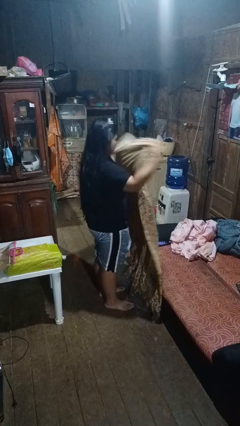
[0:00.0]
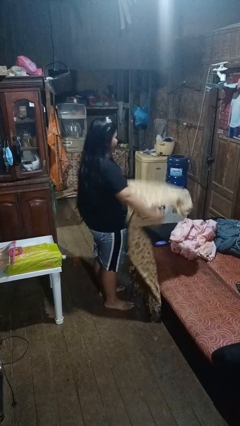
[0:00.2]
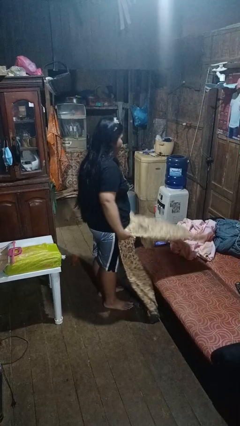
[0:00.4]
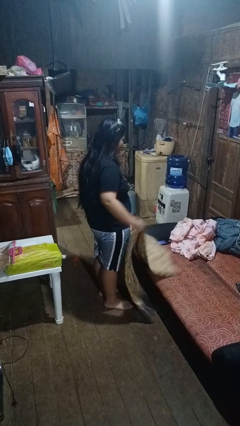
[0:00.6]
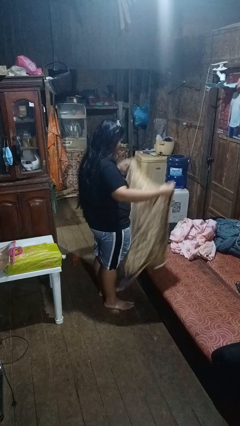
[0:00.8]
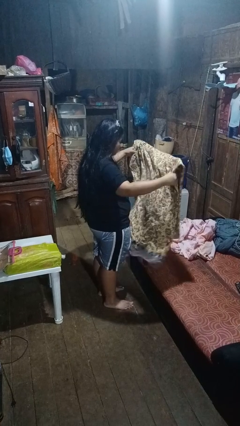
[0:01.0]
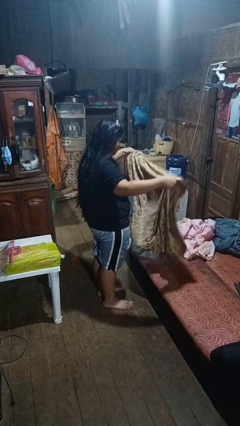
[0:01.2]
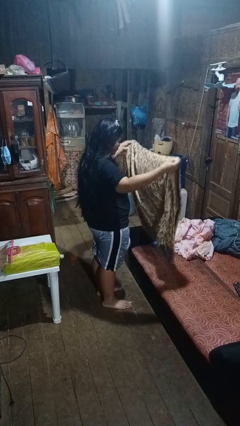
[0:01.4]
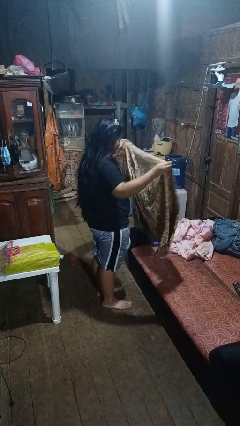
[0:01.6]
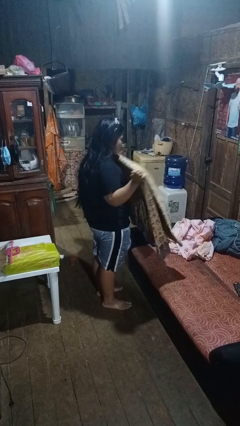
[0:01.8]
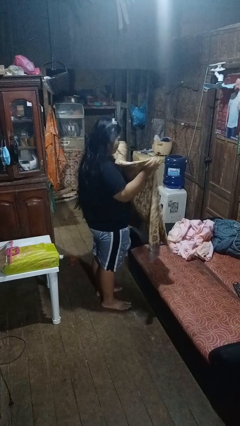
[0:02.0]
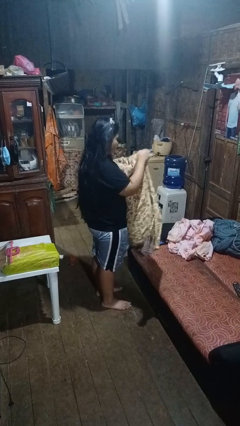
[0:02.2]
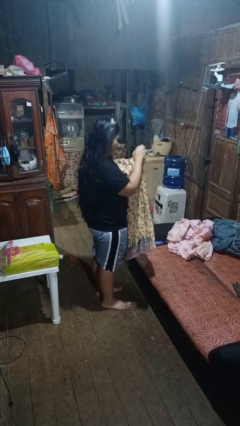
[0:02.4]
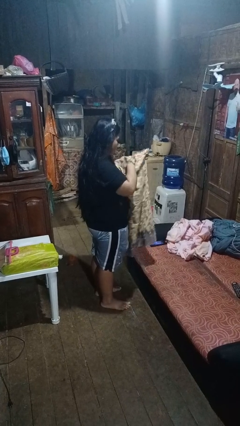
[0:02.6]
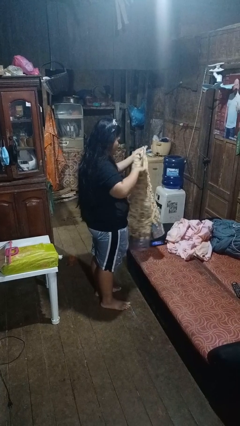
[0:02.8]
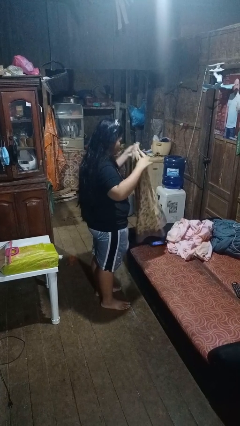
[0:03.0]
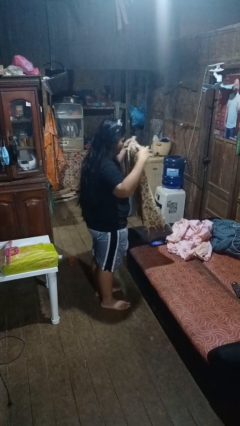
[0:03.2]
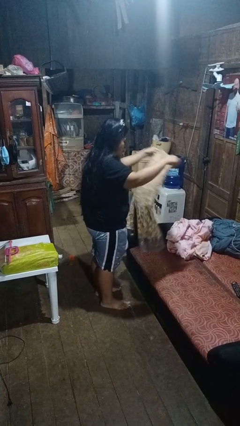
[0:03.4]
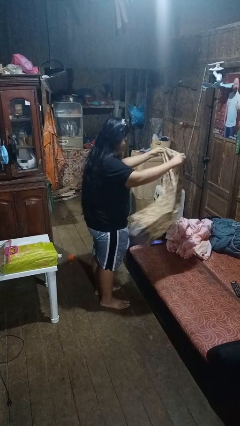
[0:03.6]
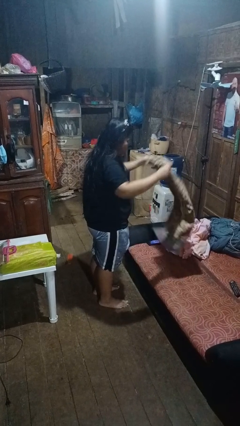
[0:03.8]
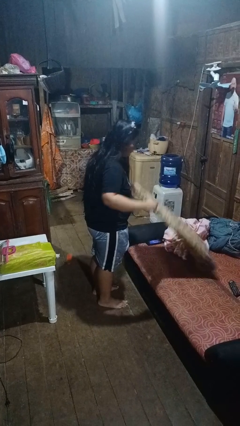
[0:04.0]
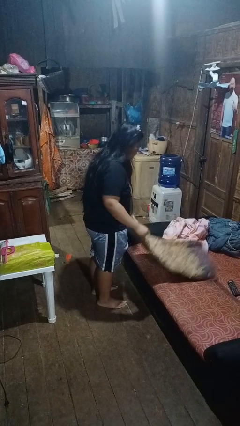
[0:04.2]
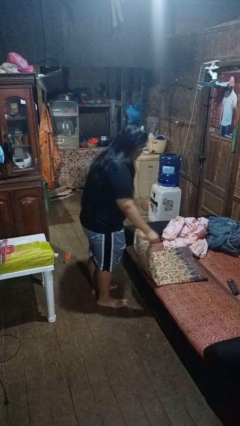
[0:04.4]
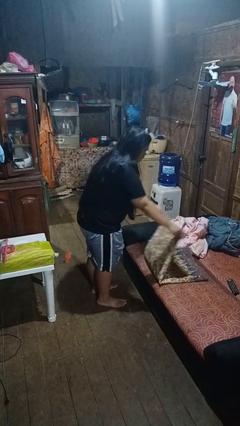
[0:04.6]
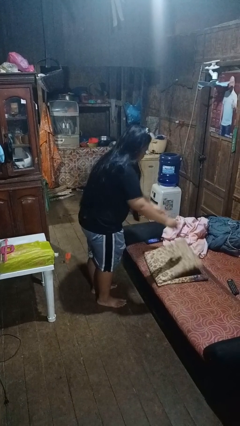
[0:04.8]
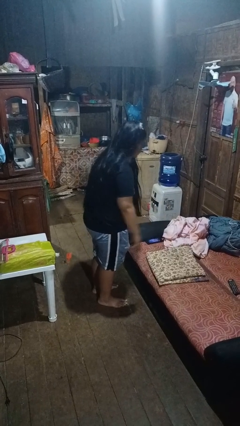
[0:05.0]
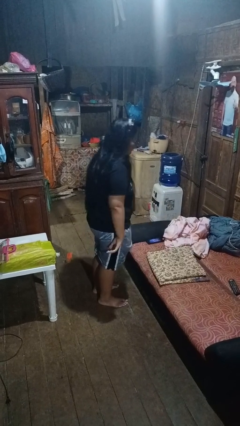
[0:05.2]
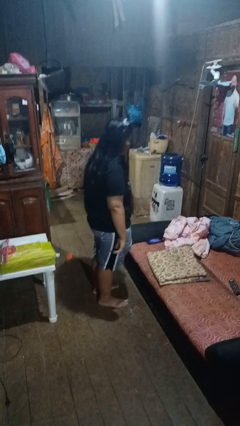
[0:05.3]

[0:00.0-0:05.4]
person folds blanket

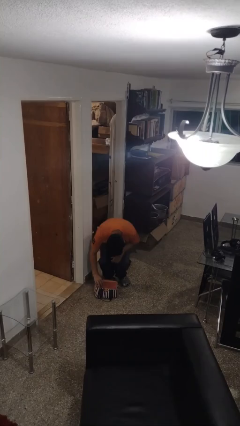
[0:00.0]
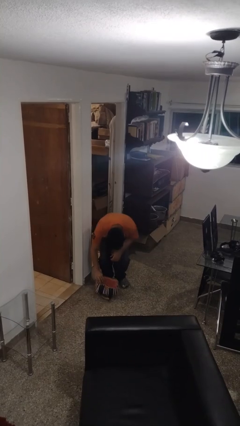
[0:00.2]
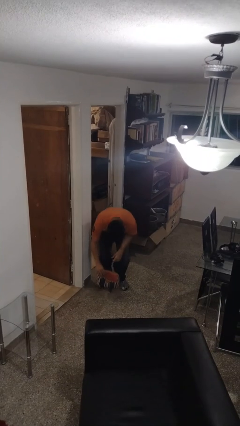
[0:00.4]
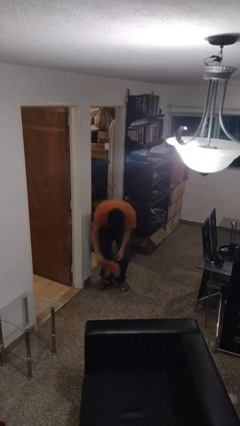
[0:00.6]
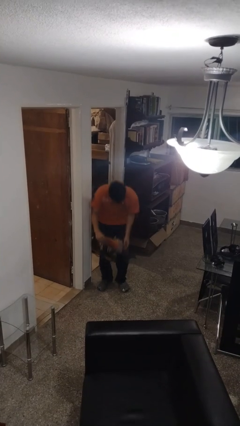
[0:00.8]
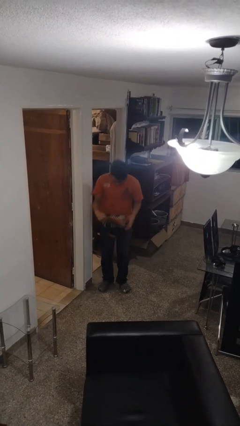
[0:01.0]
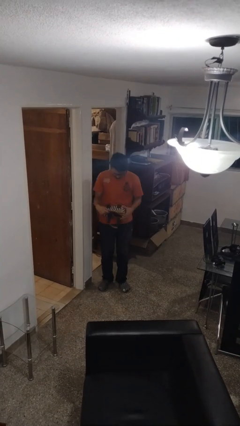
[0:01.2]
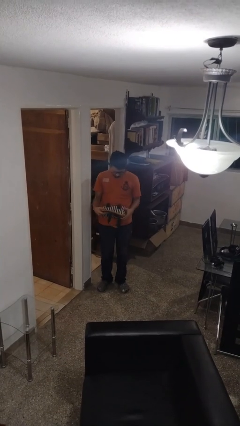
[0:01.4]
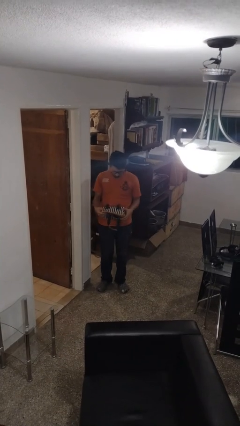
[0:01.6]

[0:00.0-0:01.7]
person picks up object from floor

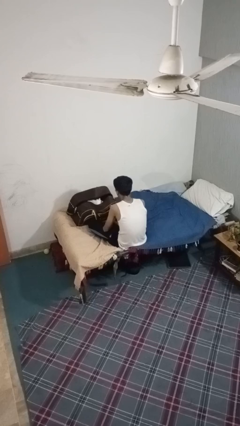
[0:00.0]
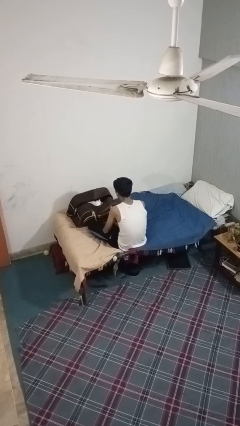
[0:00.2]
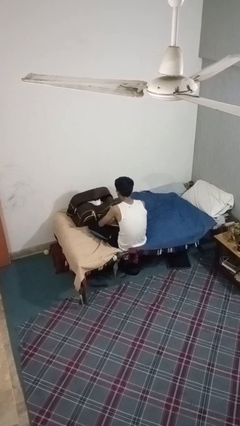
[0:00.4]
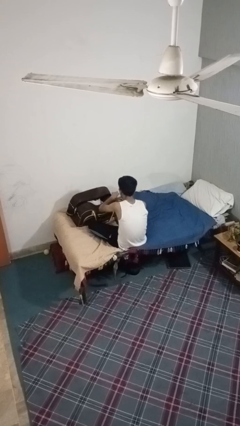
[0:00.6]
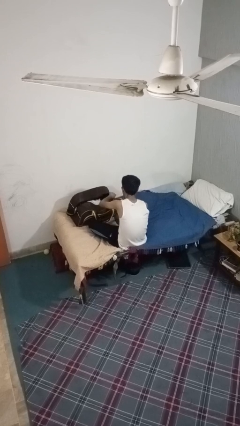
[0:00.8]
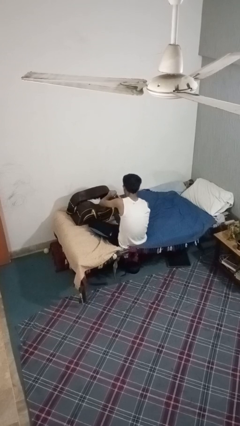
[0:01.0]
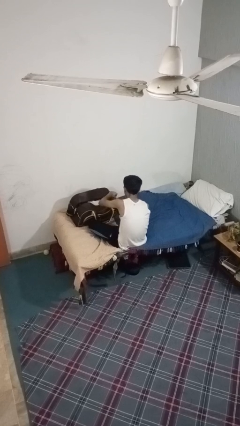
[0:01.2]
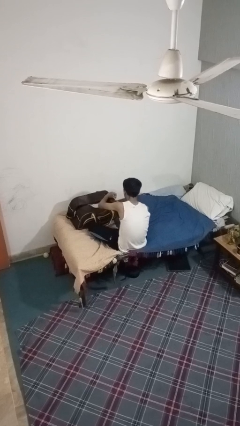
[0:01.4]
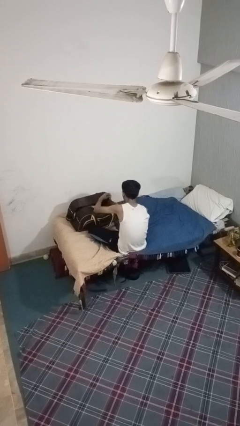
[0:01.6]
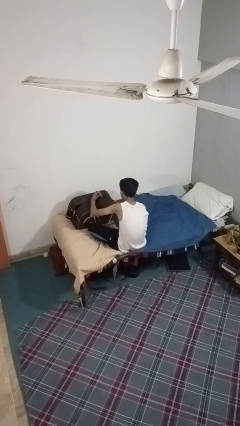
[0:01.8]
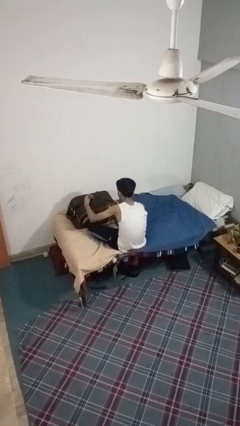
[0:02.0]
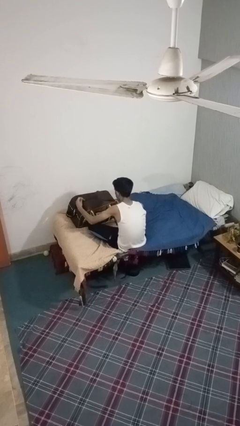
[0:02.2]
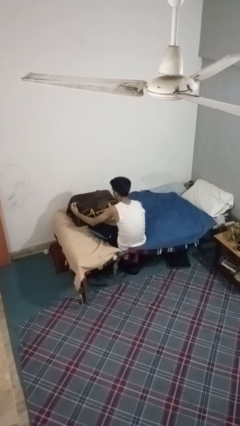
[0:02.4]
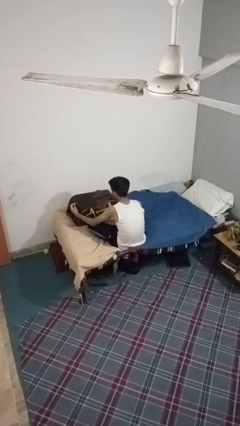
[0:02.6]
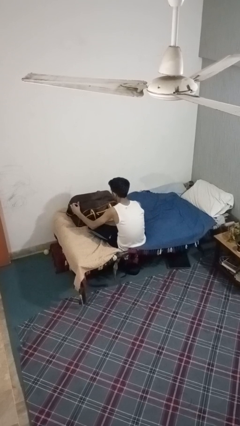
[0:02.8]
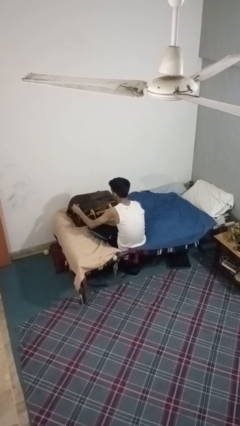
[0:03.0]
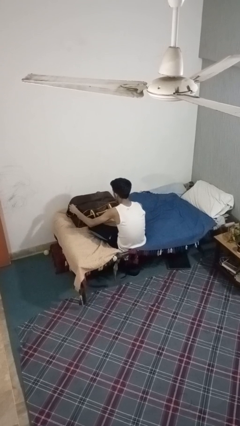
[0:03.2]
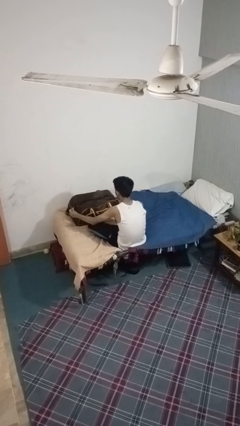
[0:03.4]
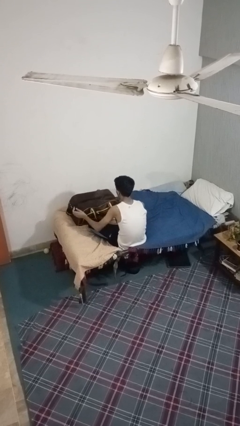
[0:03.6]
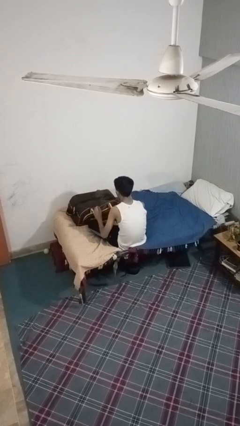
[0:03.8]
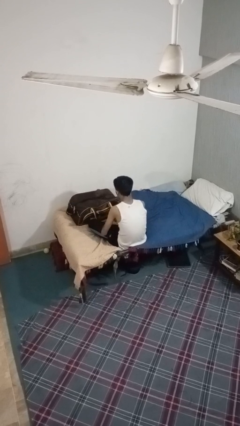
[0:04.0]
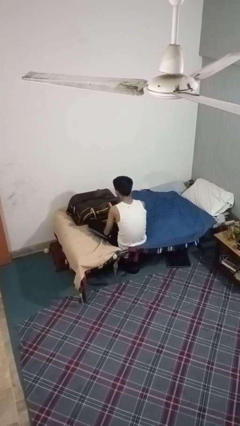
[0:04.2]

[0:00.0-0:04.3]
person closes suitcase

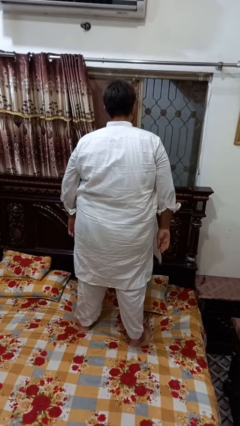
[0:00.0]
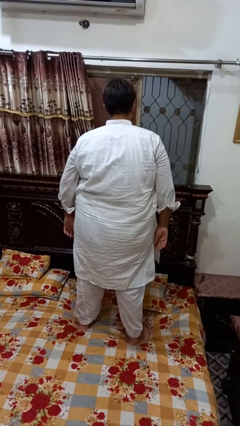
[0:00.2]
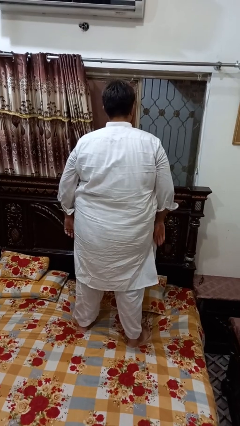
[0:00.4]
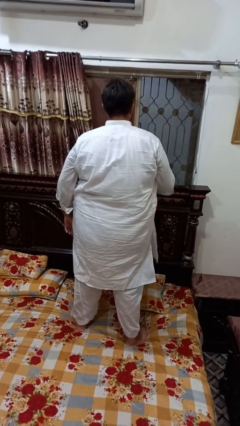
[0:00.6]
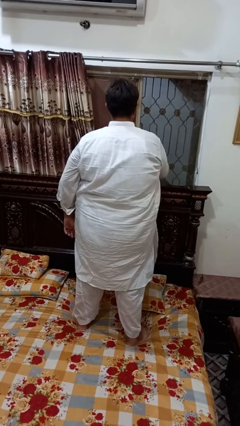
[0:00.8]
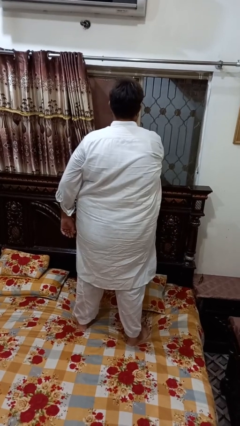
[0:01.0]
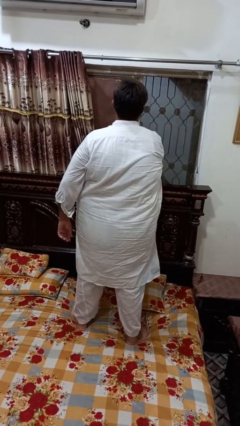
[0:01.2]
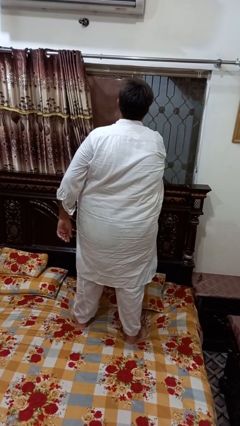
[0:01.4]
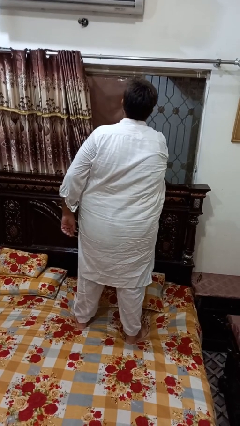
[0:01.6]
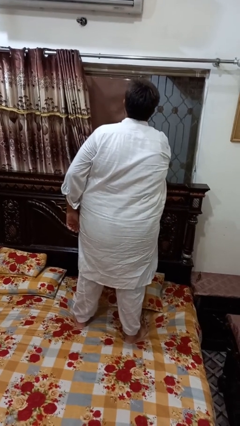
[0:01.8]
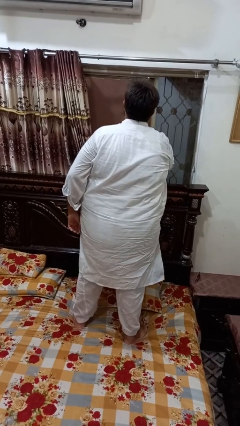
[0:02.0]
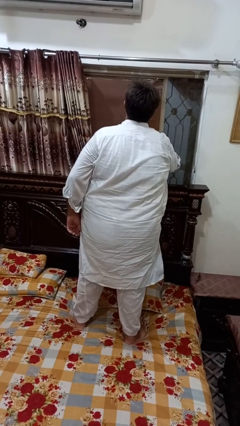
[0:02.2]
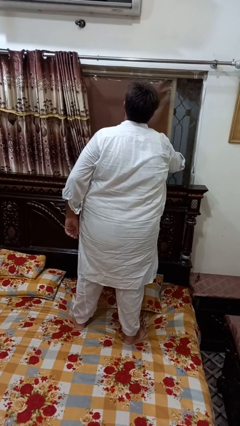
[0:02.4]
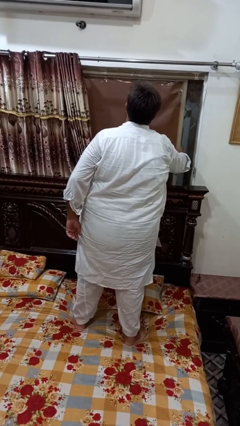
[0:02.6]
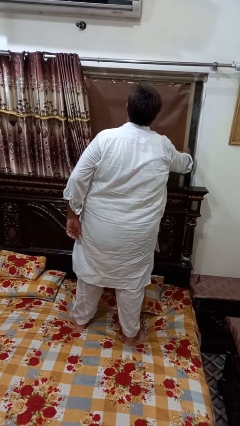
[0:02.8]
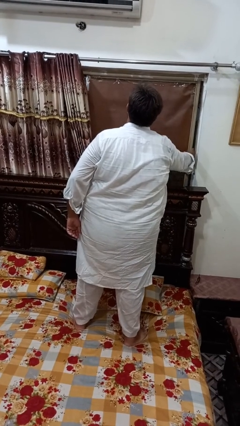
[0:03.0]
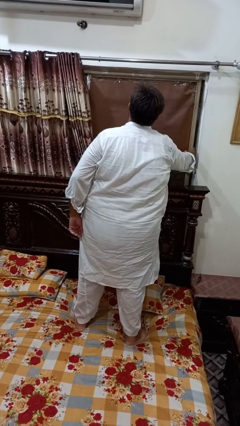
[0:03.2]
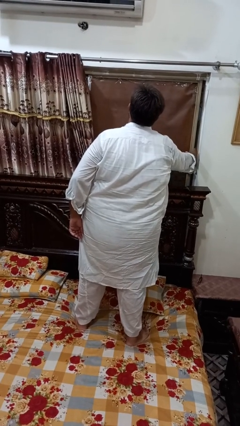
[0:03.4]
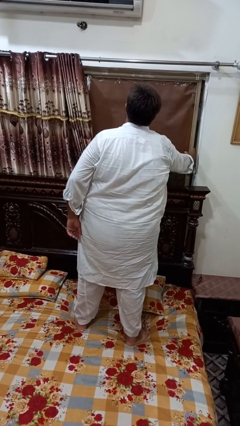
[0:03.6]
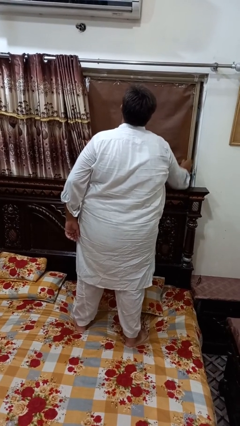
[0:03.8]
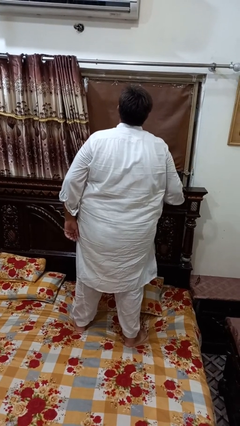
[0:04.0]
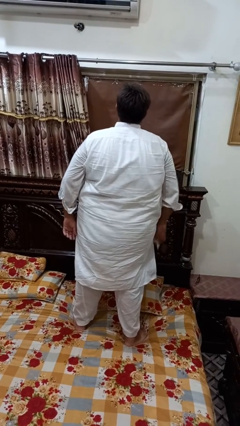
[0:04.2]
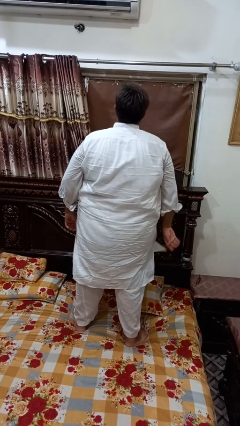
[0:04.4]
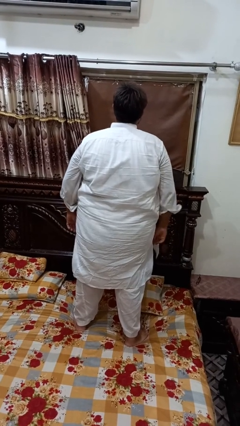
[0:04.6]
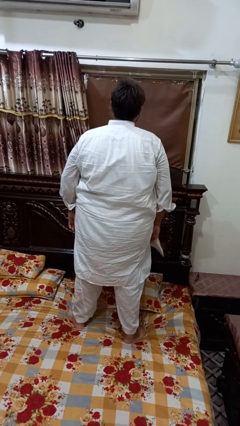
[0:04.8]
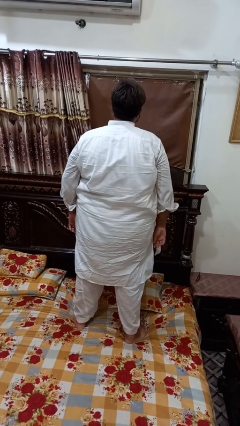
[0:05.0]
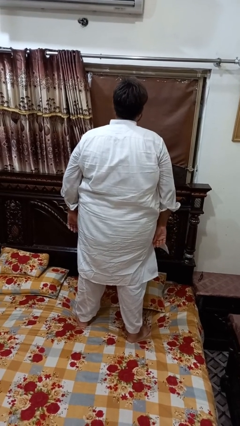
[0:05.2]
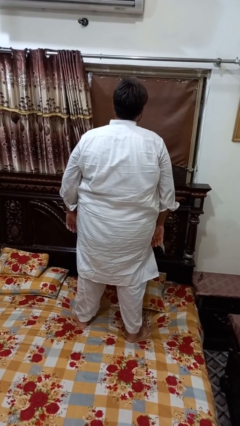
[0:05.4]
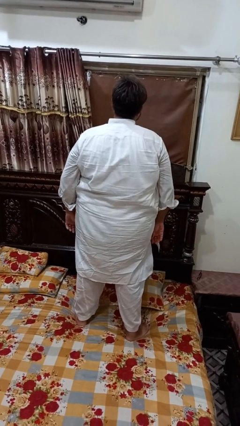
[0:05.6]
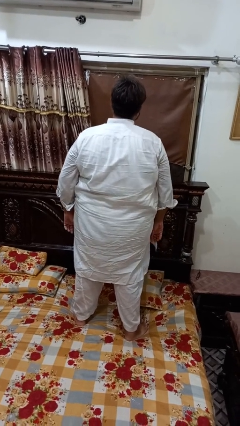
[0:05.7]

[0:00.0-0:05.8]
person closes home window

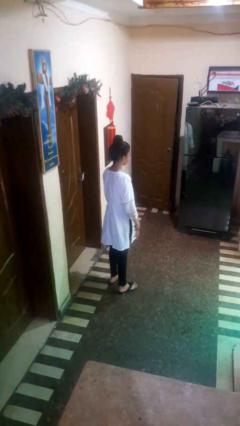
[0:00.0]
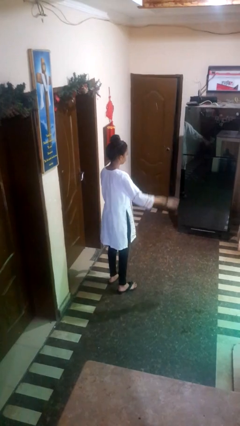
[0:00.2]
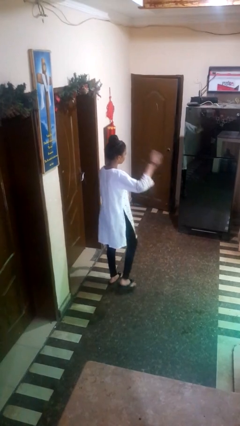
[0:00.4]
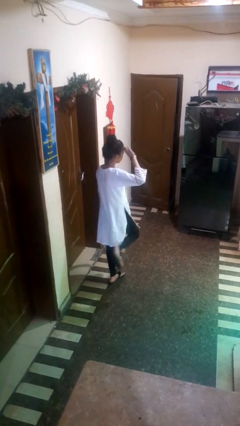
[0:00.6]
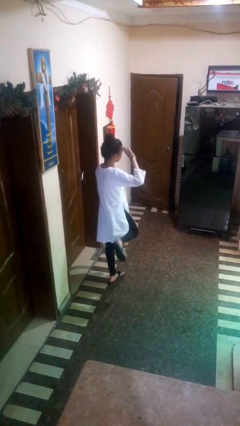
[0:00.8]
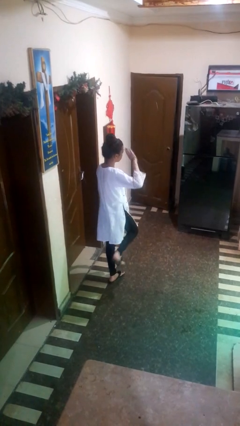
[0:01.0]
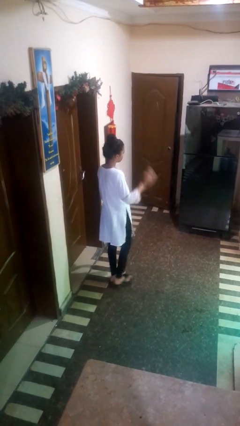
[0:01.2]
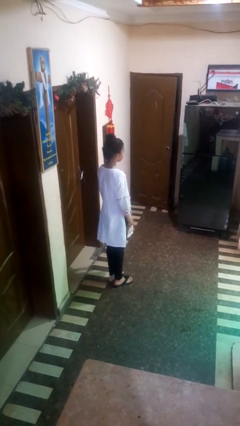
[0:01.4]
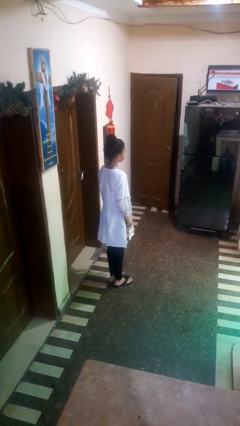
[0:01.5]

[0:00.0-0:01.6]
person salutes
